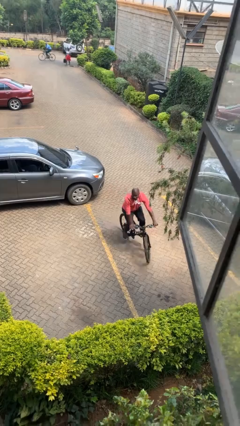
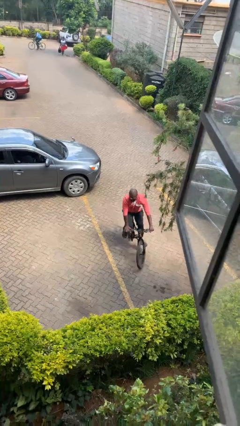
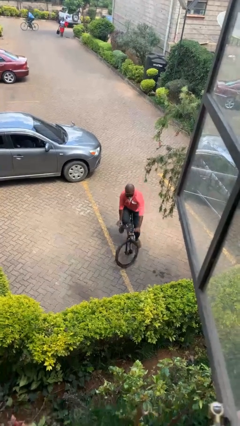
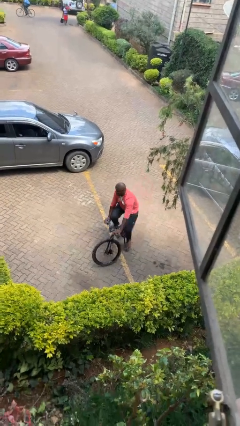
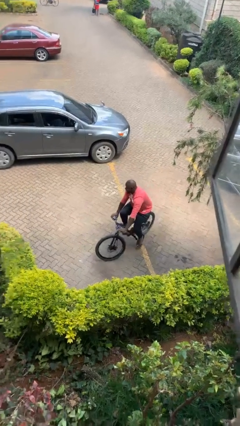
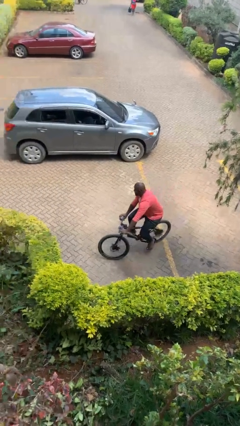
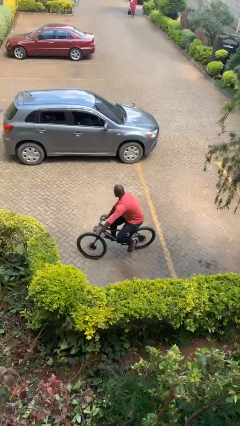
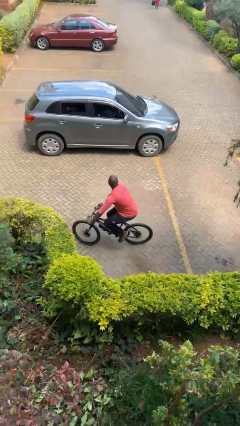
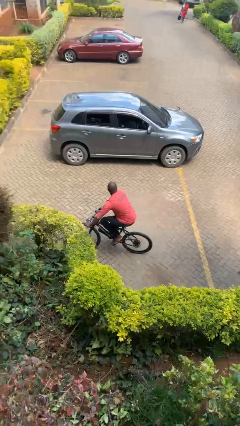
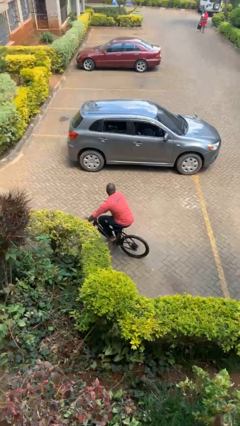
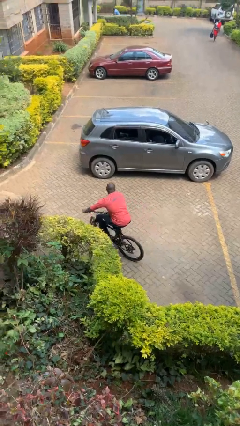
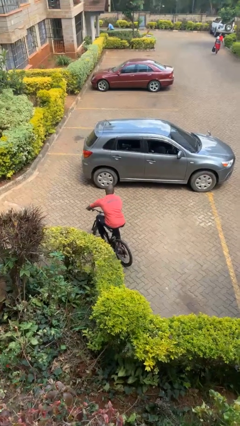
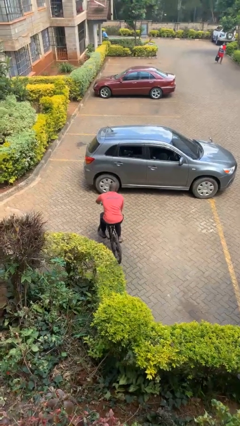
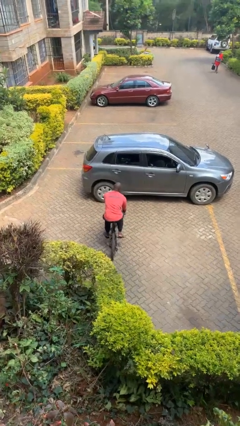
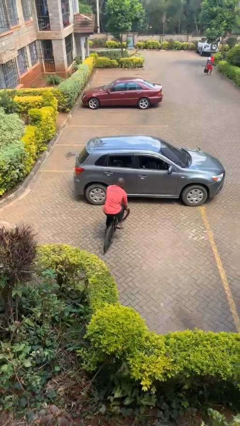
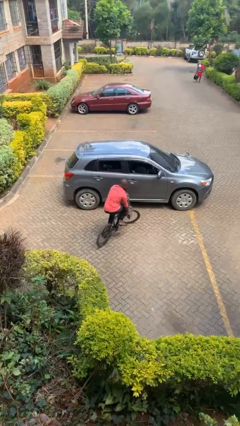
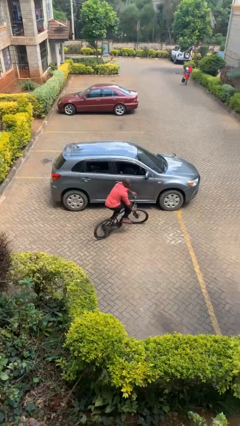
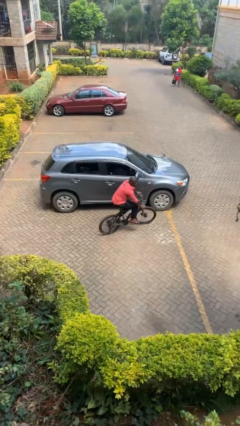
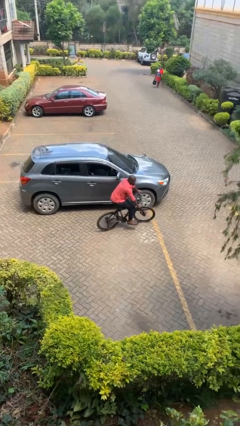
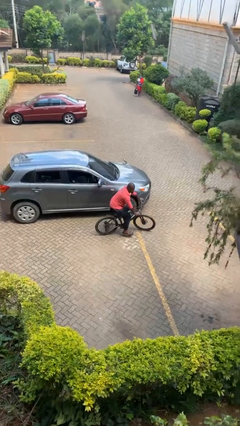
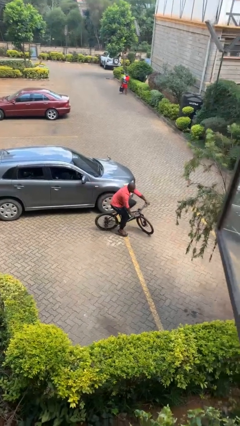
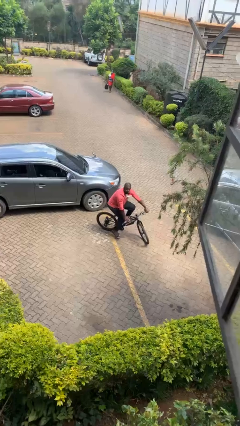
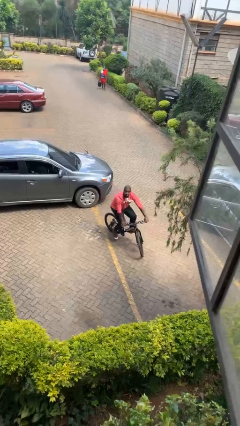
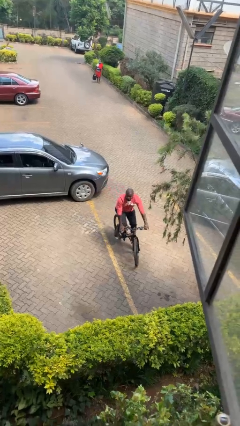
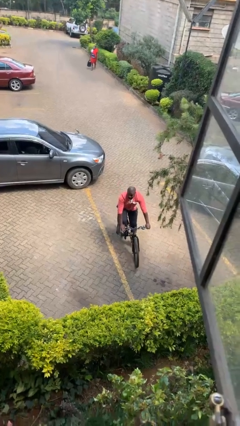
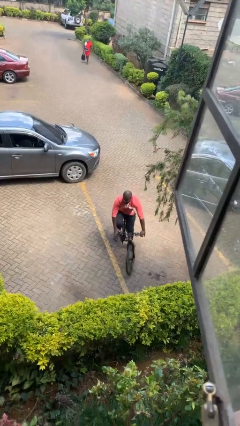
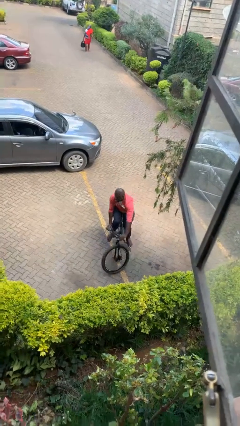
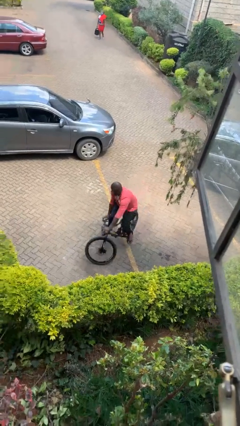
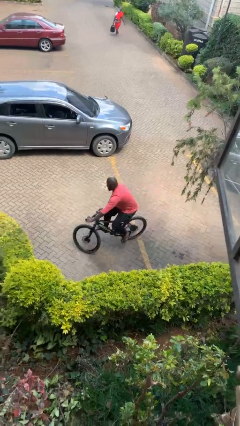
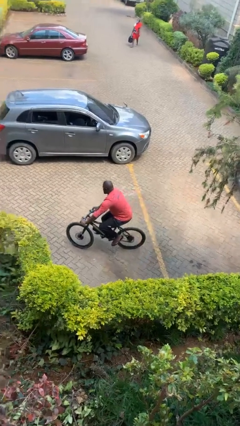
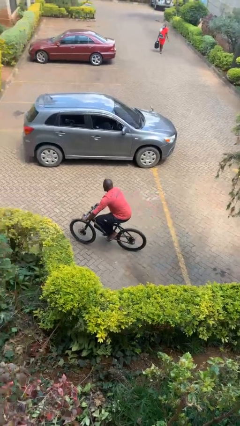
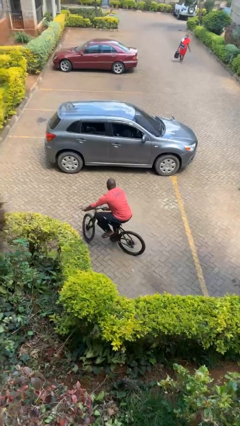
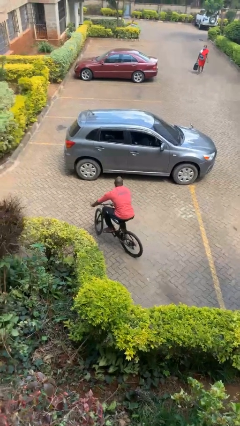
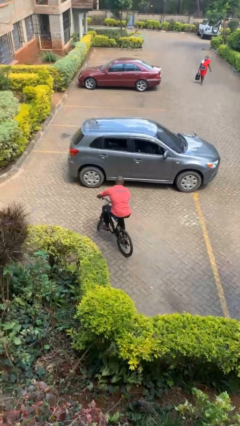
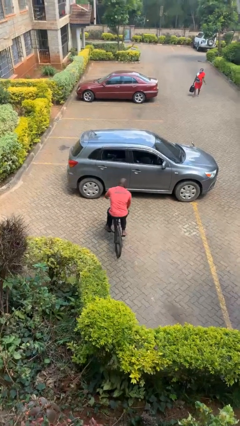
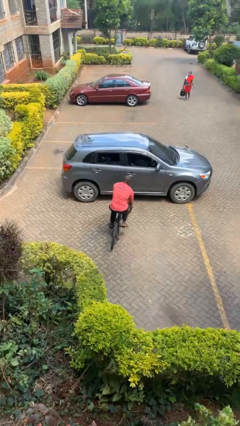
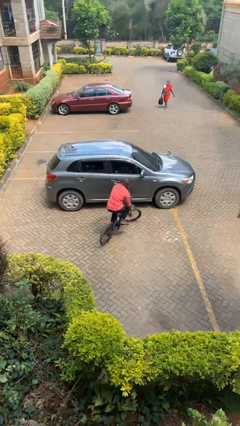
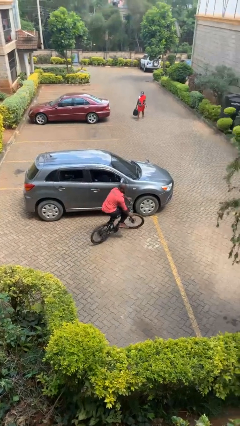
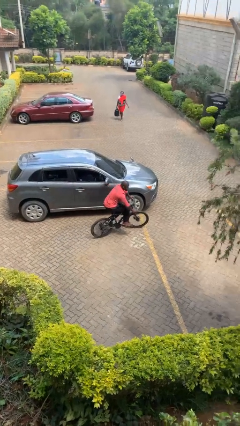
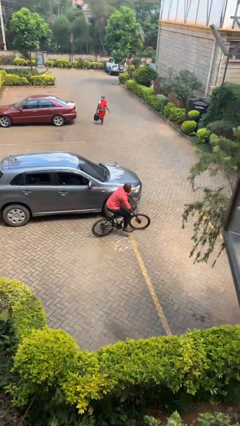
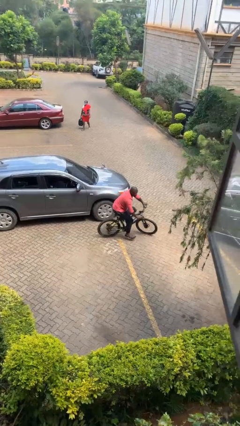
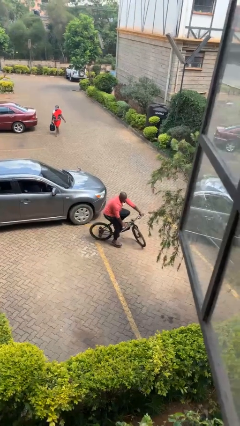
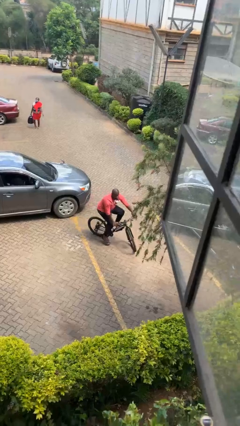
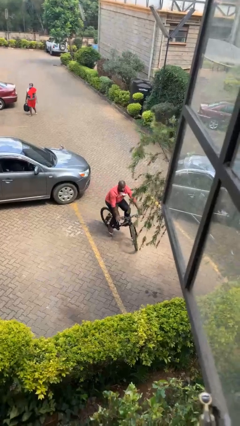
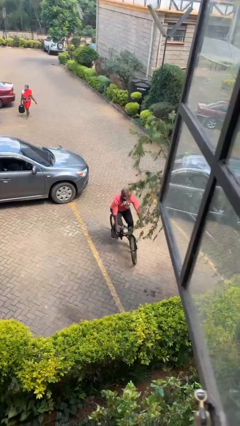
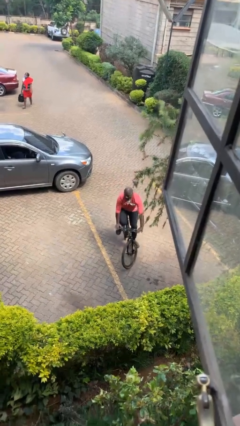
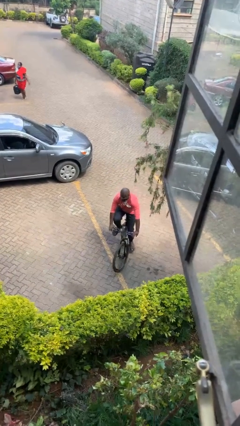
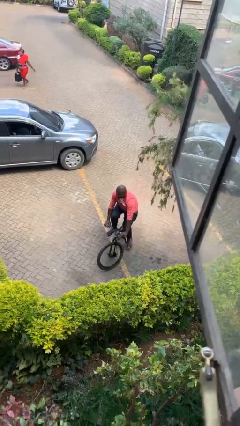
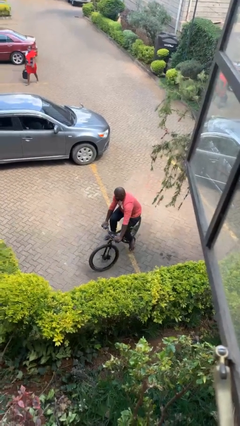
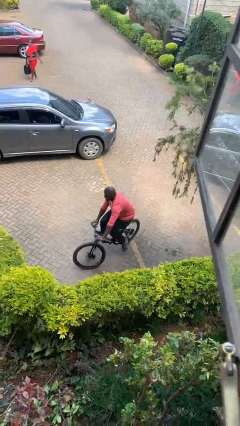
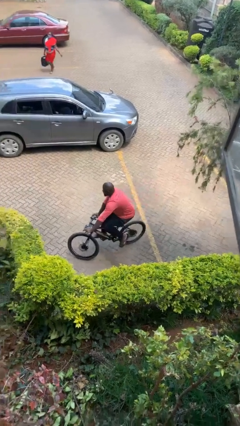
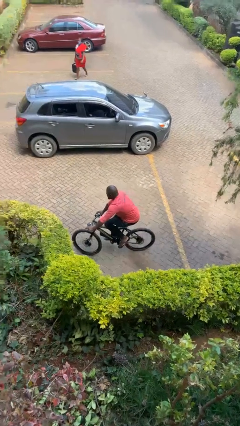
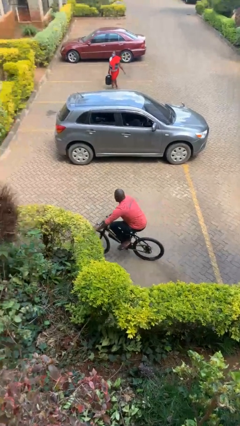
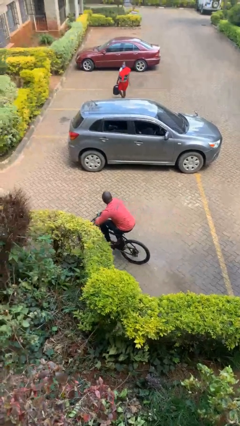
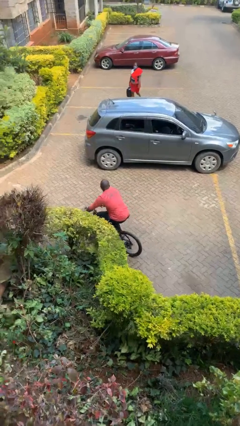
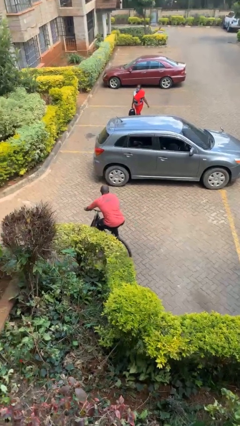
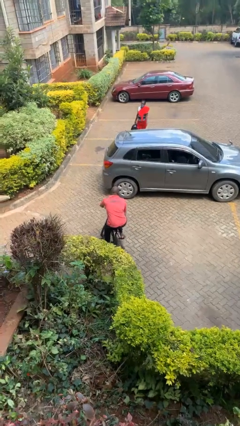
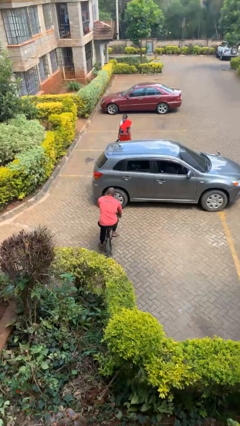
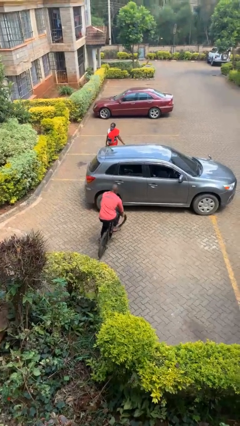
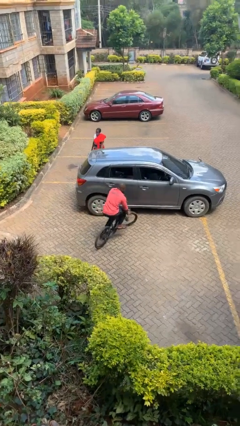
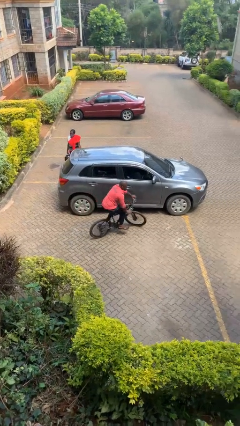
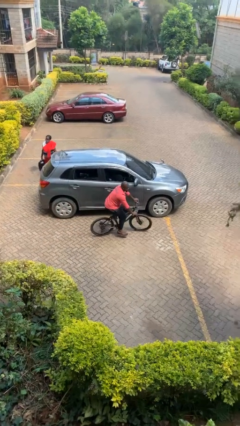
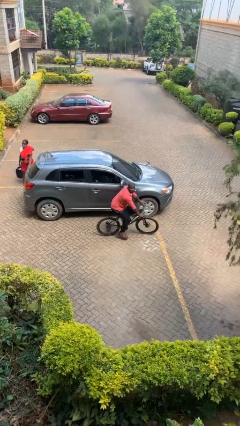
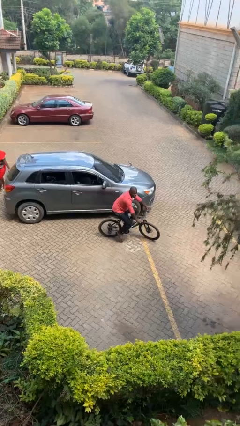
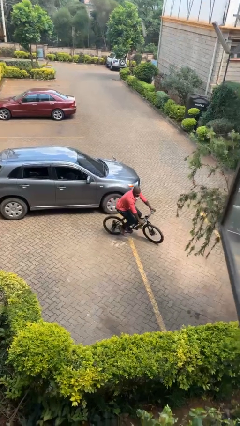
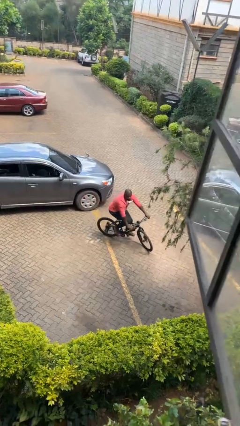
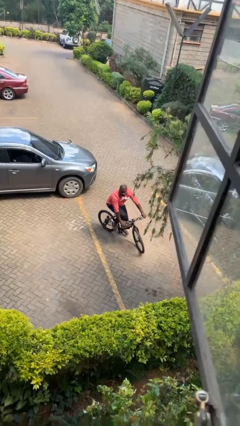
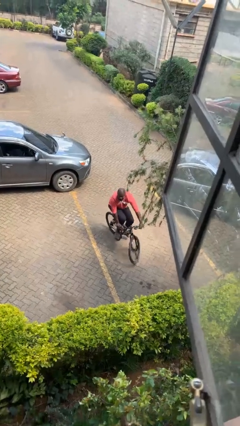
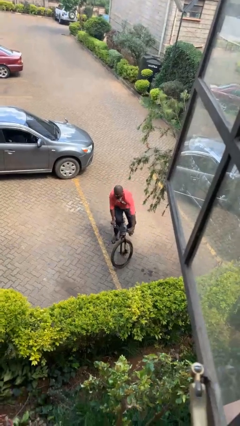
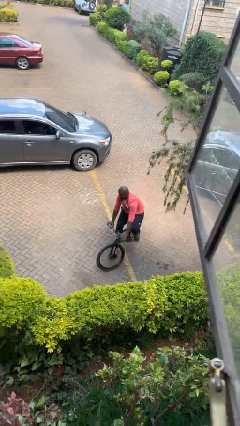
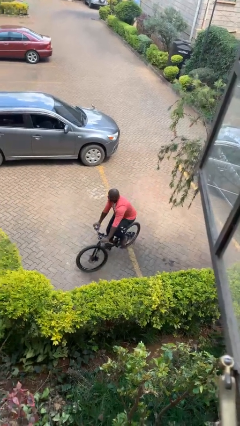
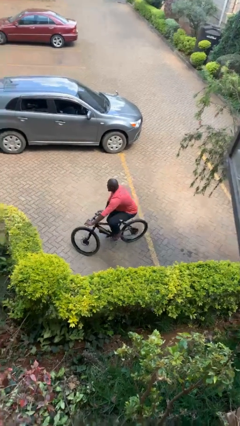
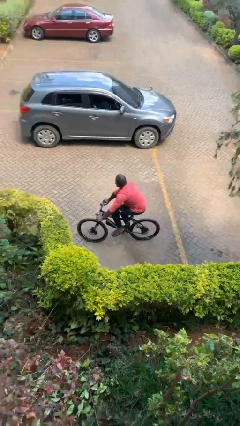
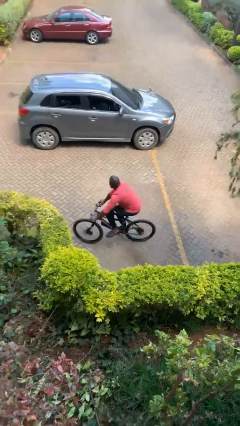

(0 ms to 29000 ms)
person rides bicycle

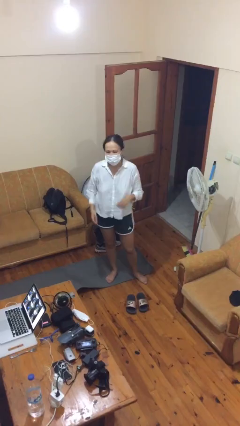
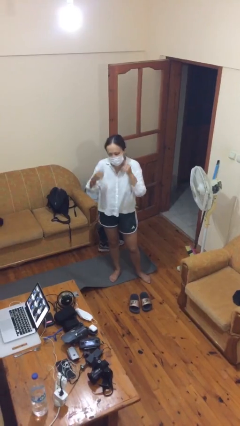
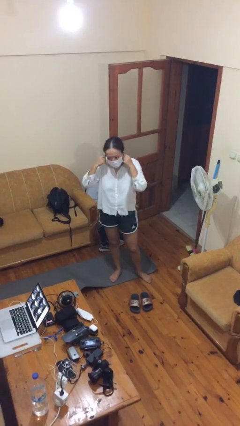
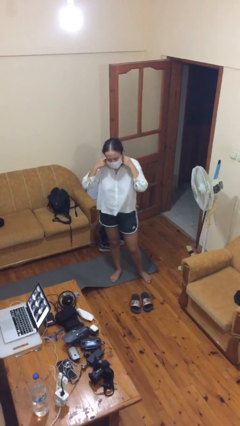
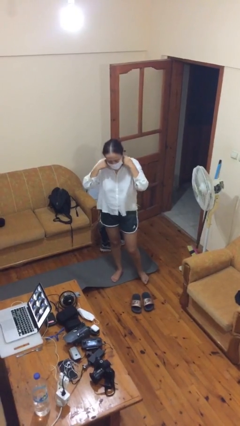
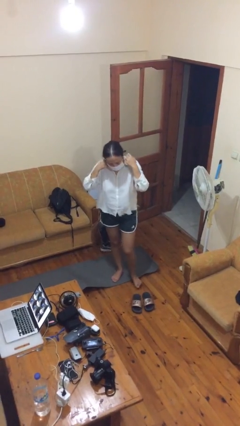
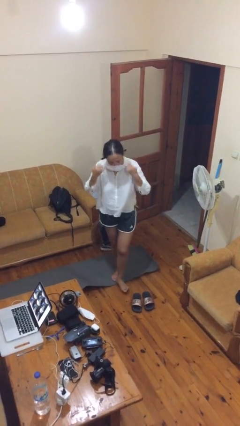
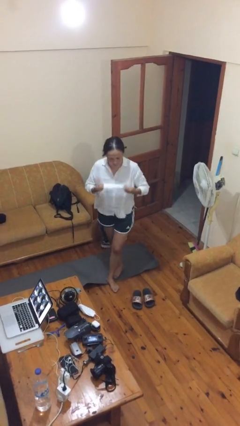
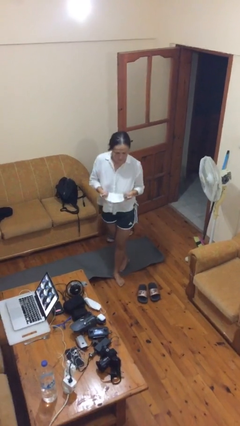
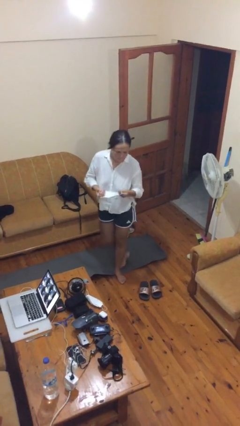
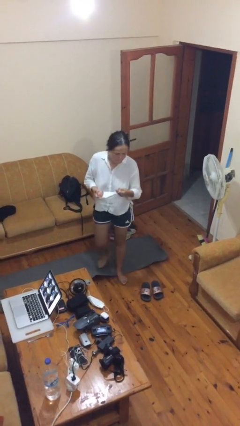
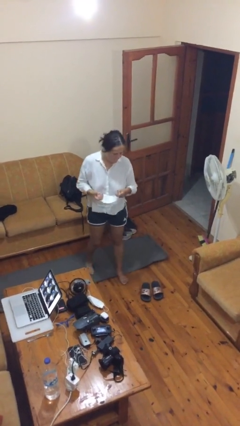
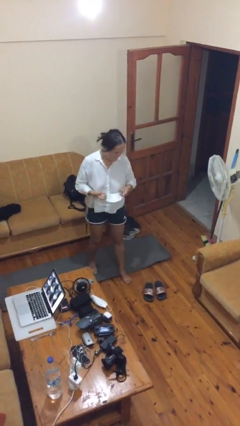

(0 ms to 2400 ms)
person takes off facemask

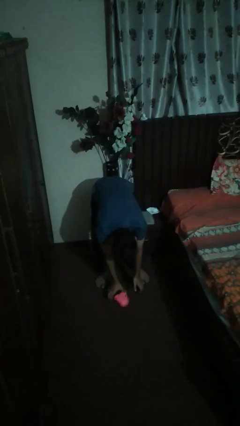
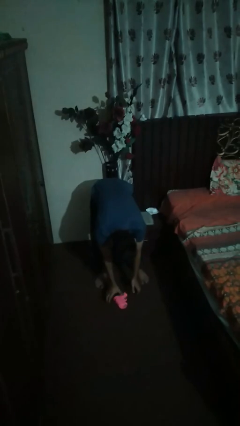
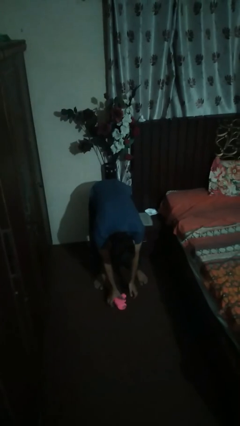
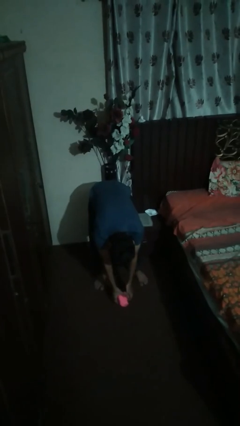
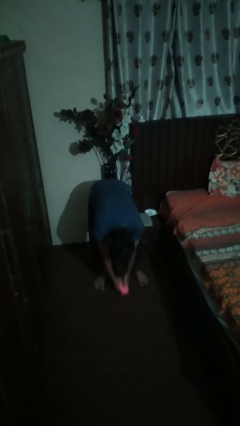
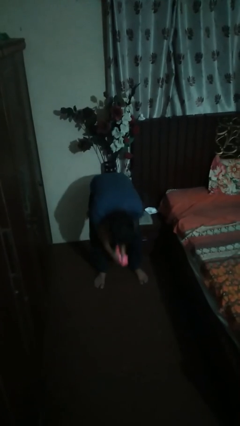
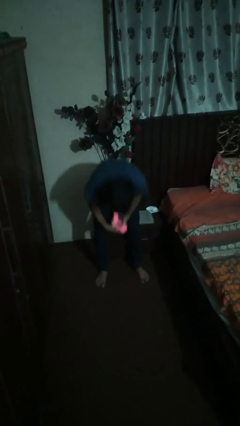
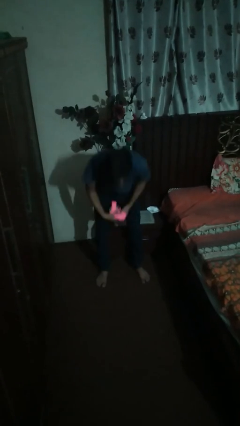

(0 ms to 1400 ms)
person picks up object from floor
